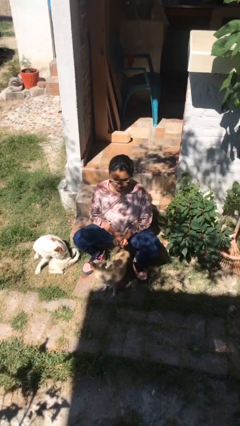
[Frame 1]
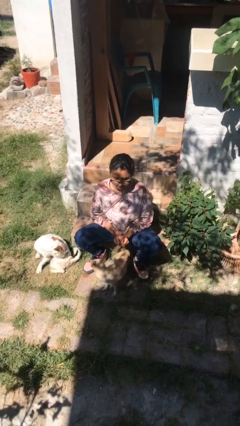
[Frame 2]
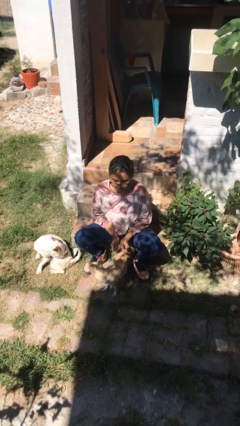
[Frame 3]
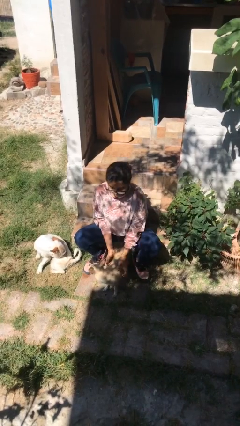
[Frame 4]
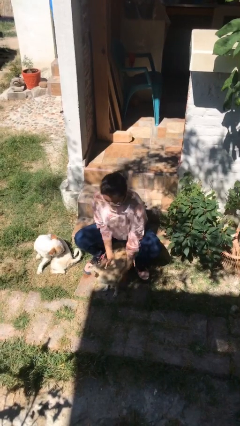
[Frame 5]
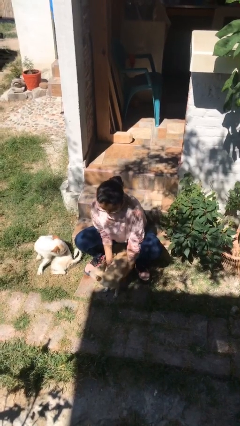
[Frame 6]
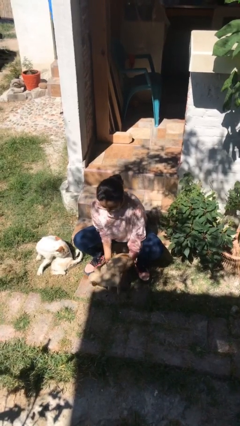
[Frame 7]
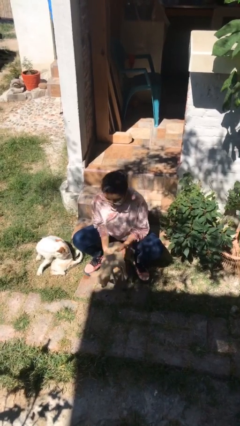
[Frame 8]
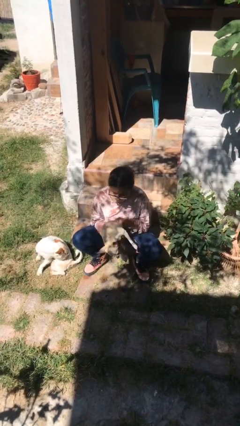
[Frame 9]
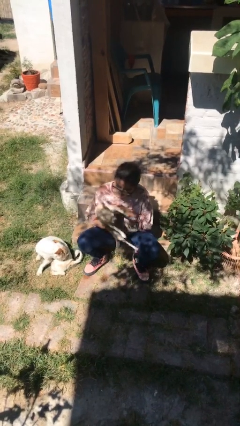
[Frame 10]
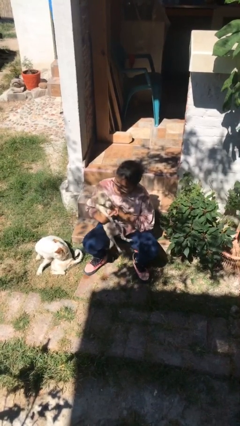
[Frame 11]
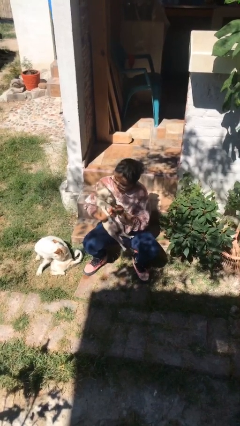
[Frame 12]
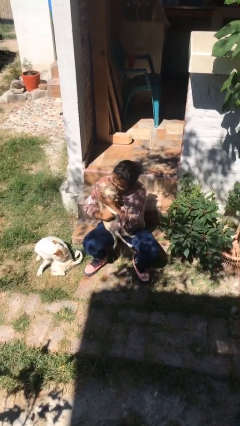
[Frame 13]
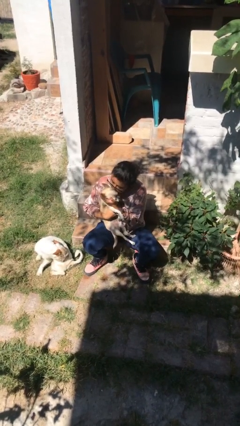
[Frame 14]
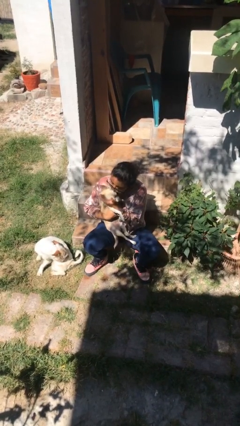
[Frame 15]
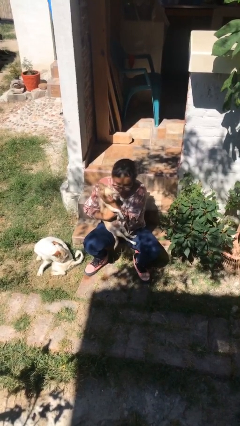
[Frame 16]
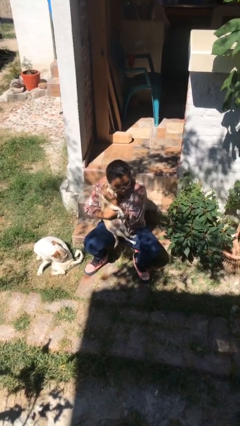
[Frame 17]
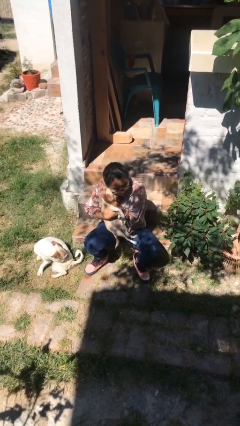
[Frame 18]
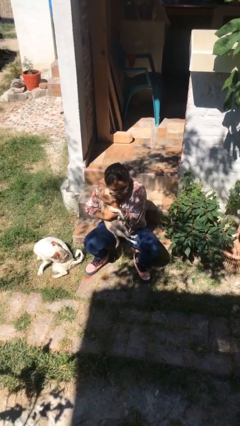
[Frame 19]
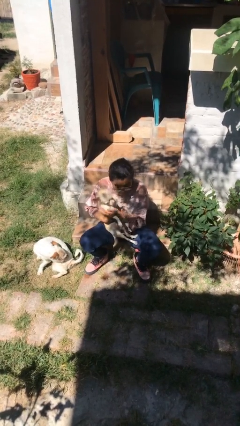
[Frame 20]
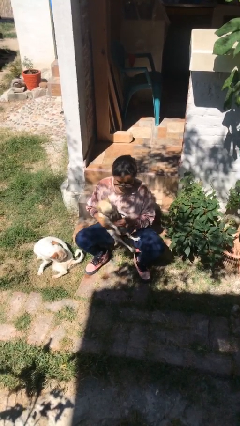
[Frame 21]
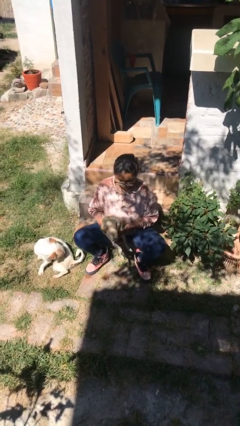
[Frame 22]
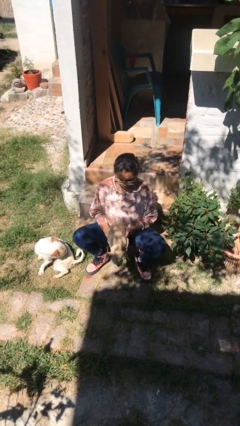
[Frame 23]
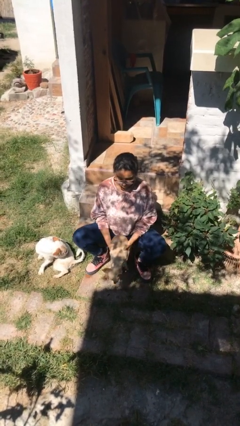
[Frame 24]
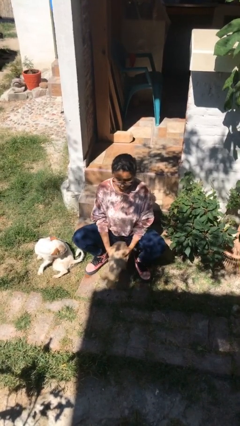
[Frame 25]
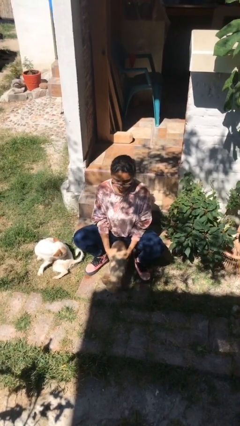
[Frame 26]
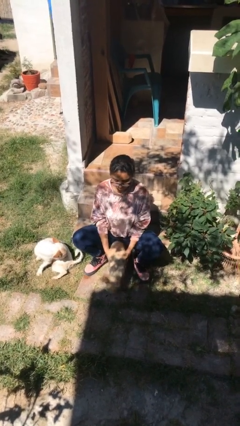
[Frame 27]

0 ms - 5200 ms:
person hugs dog

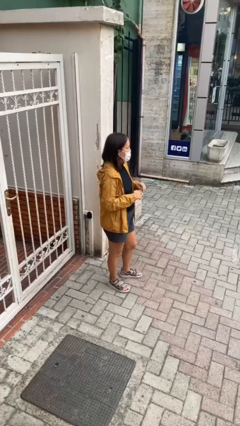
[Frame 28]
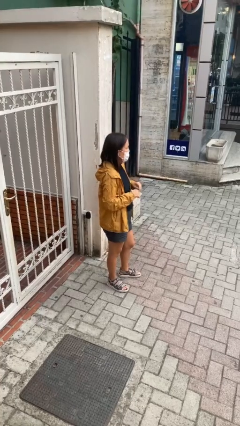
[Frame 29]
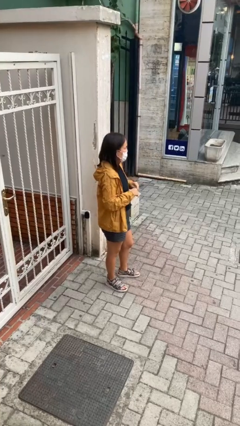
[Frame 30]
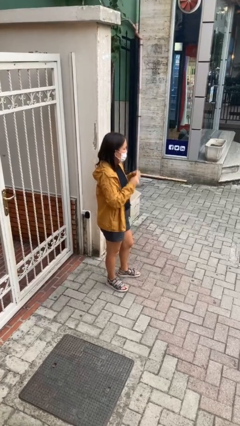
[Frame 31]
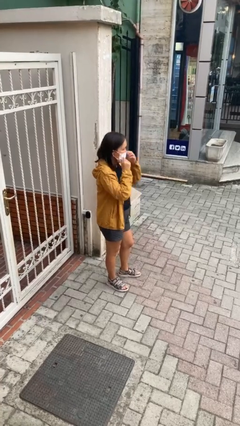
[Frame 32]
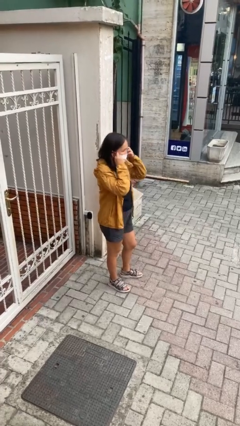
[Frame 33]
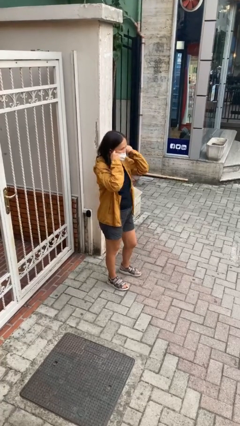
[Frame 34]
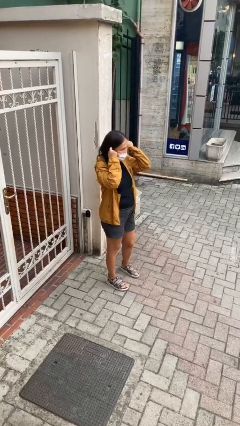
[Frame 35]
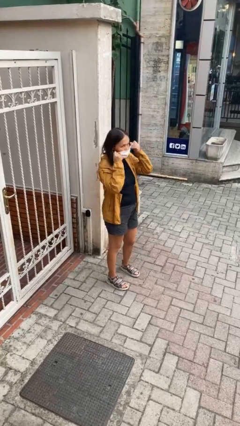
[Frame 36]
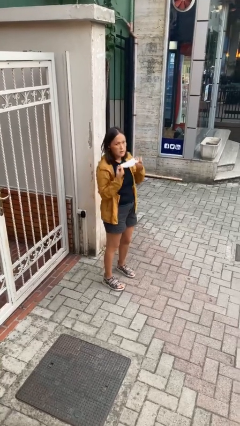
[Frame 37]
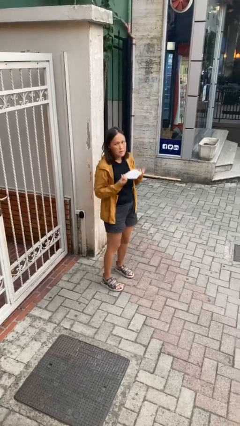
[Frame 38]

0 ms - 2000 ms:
person takes off facemask

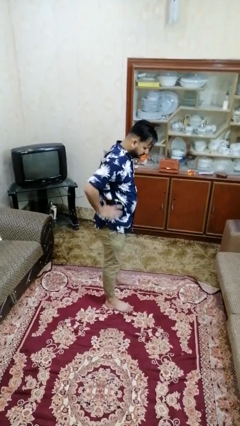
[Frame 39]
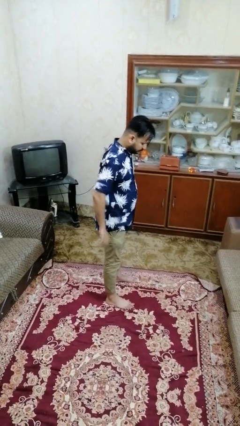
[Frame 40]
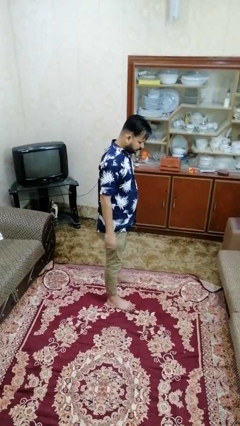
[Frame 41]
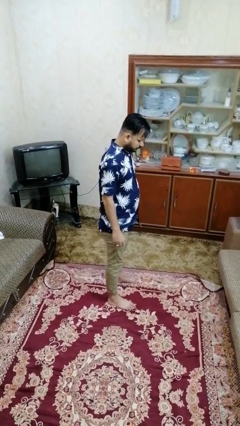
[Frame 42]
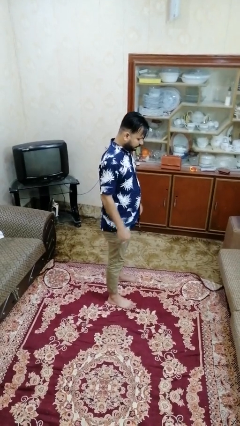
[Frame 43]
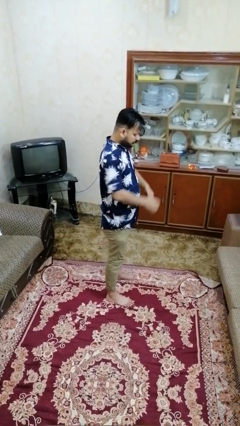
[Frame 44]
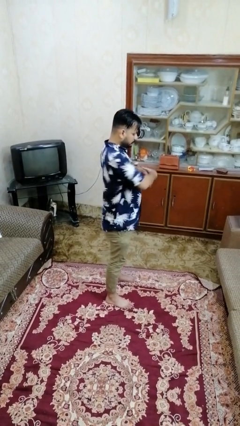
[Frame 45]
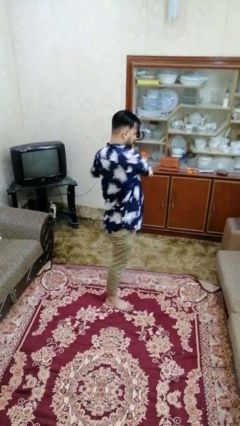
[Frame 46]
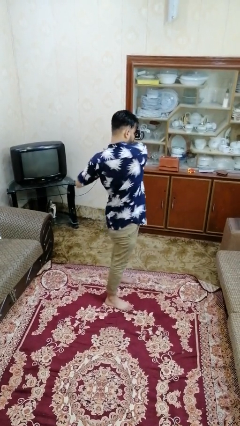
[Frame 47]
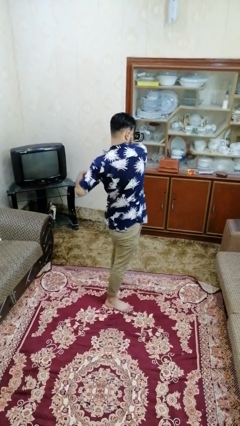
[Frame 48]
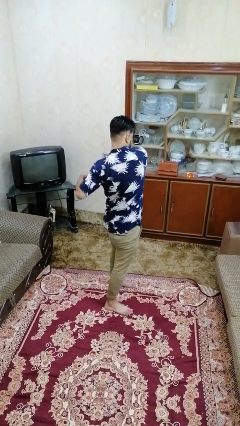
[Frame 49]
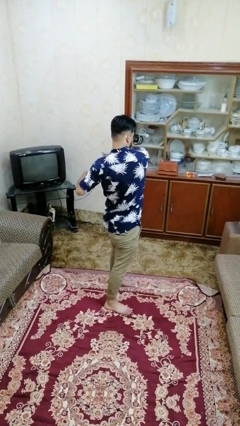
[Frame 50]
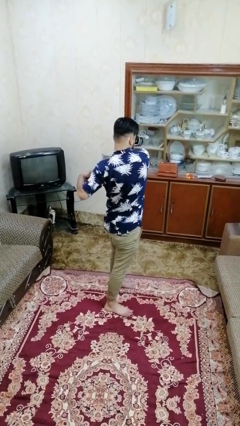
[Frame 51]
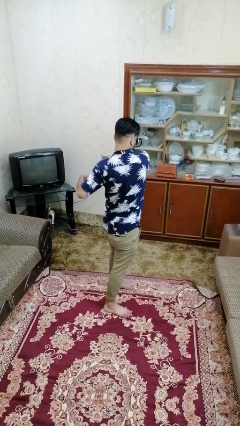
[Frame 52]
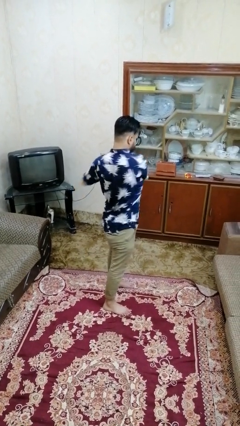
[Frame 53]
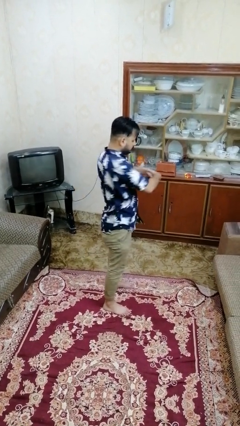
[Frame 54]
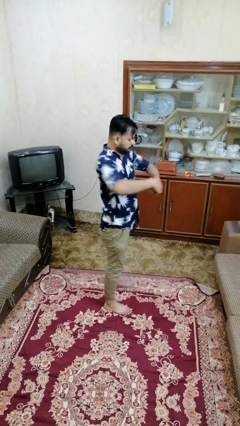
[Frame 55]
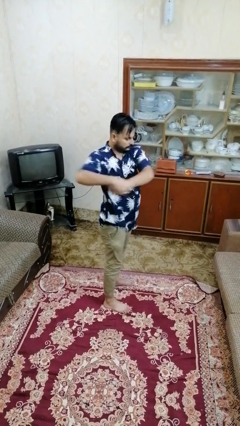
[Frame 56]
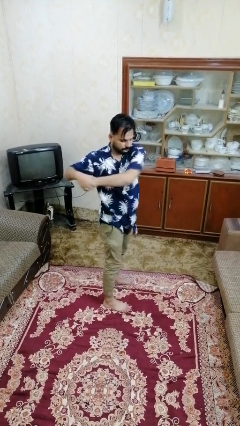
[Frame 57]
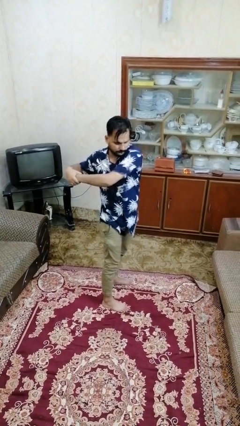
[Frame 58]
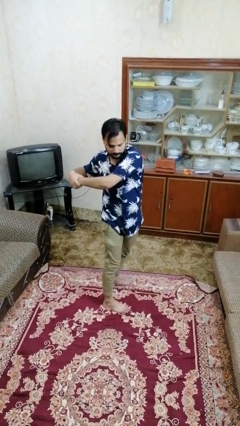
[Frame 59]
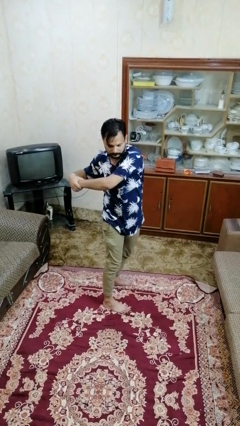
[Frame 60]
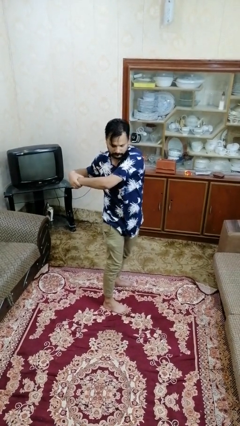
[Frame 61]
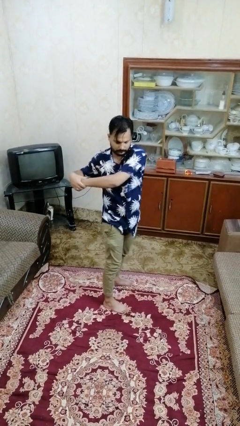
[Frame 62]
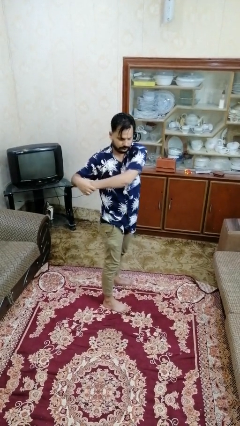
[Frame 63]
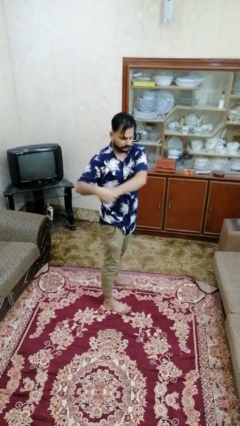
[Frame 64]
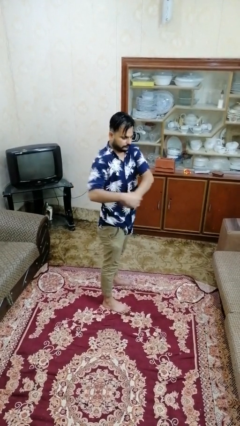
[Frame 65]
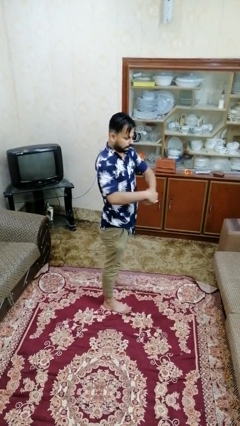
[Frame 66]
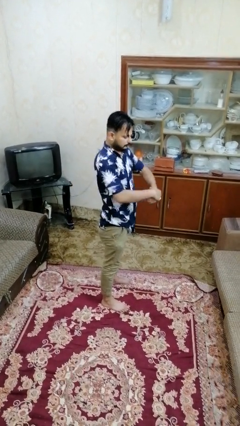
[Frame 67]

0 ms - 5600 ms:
person stretches arms to side

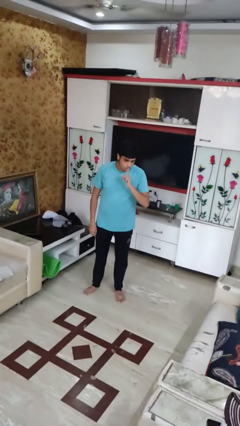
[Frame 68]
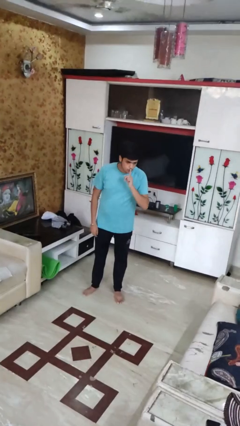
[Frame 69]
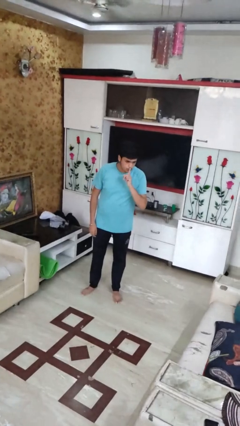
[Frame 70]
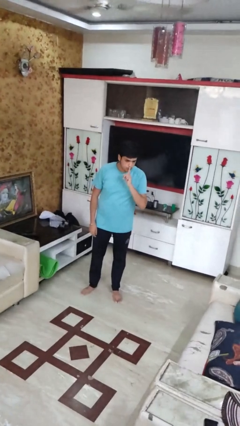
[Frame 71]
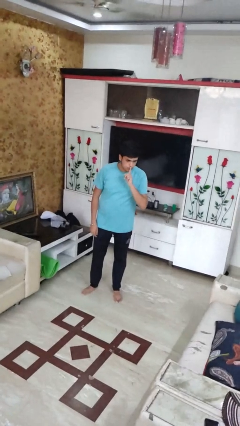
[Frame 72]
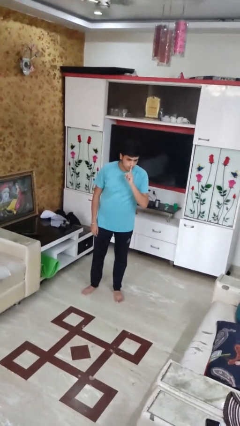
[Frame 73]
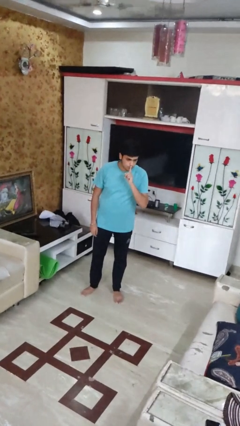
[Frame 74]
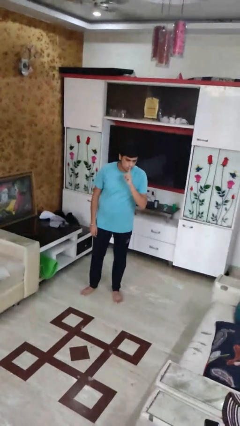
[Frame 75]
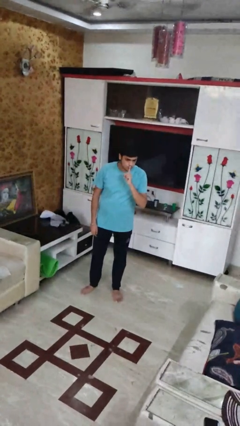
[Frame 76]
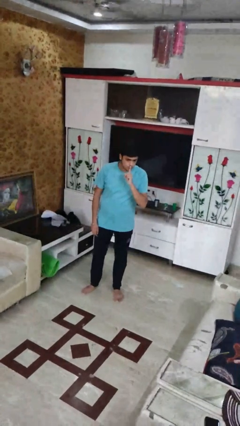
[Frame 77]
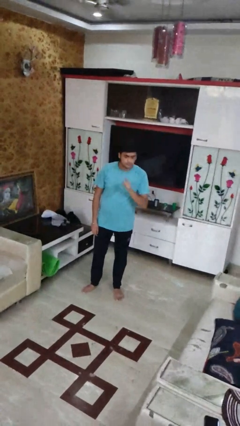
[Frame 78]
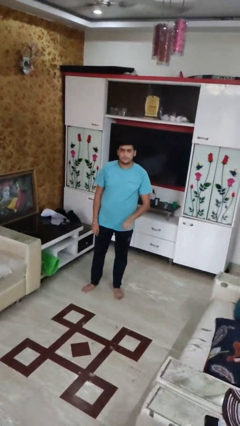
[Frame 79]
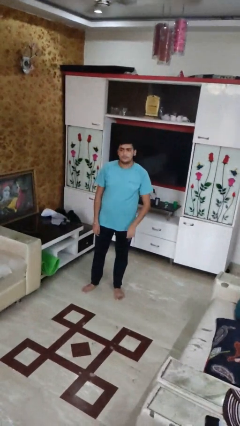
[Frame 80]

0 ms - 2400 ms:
person gestures be quiet

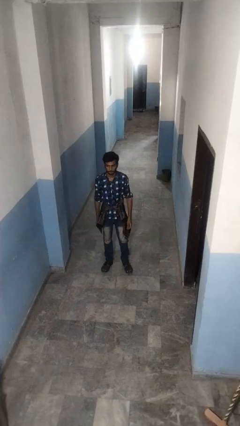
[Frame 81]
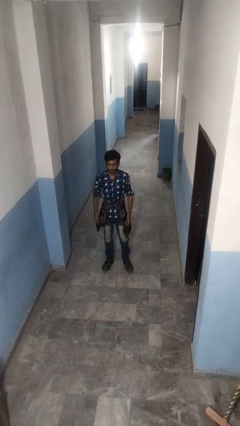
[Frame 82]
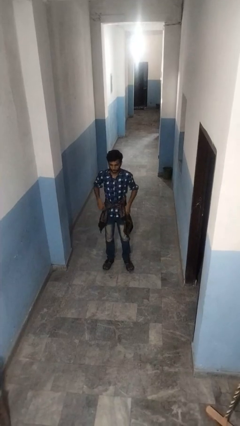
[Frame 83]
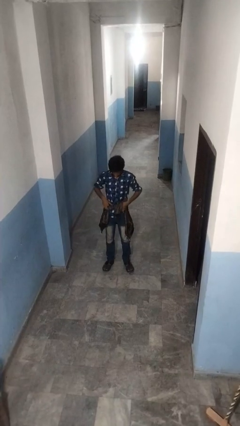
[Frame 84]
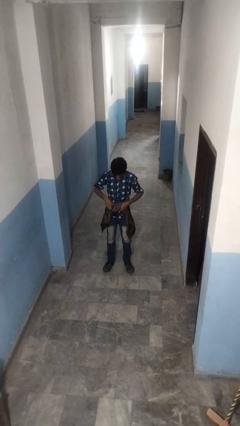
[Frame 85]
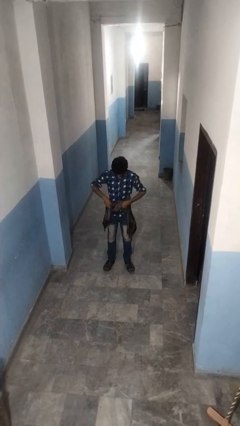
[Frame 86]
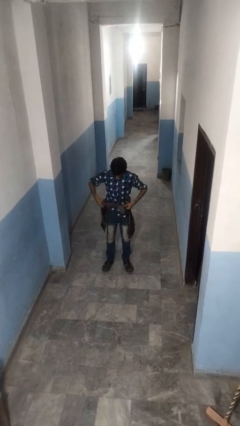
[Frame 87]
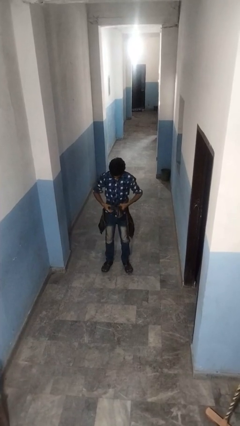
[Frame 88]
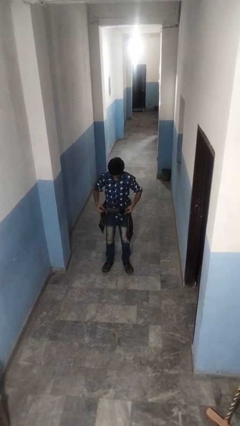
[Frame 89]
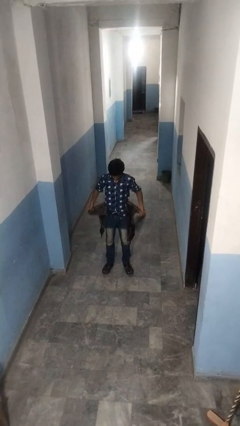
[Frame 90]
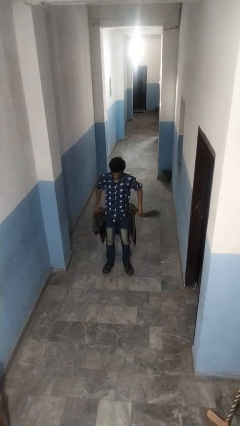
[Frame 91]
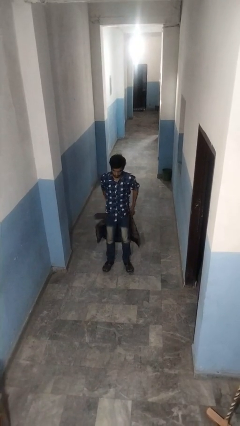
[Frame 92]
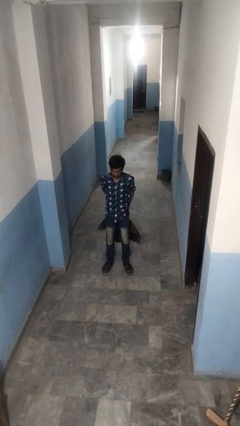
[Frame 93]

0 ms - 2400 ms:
person unties jacket around waist
